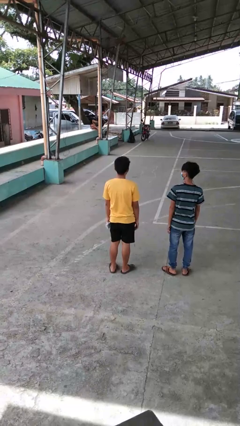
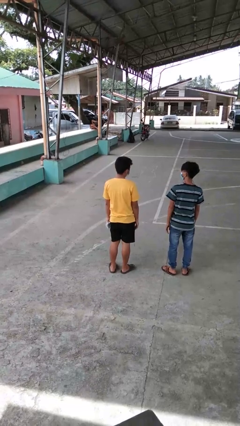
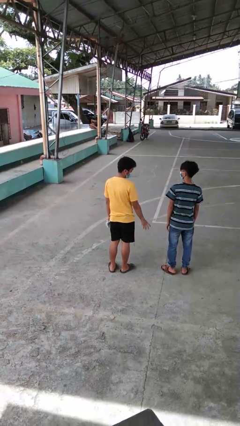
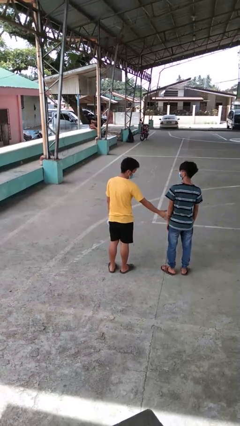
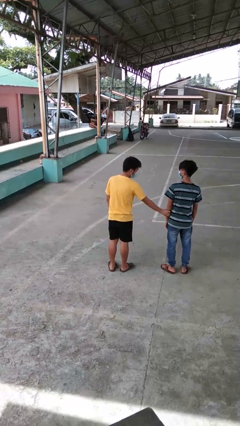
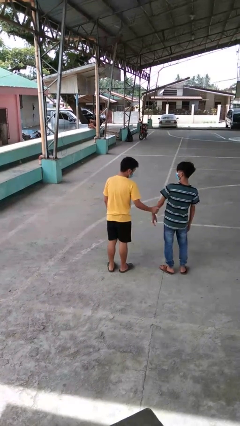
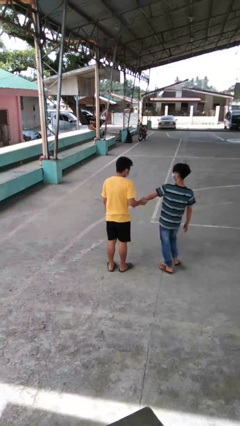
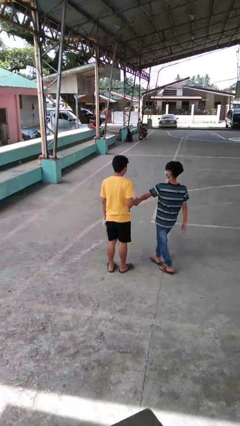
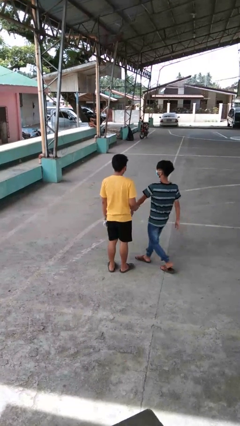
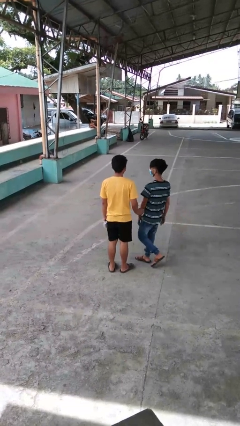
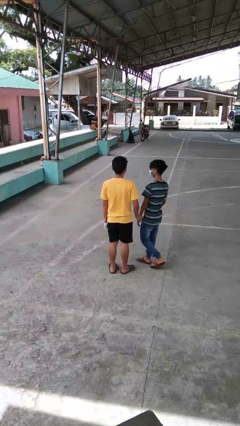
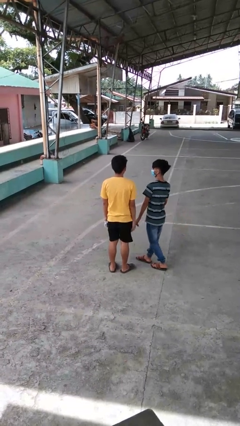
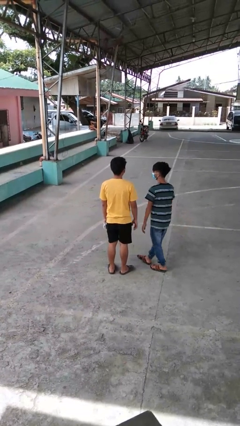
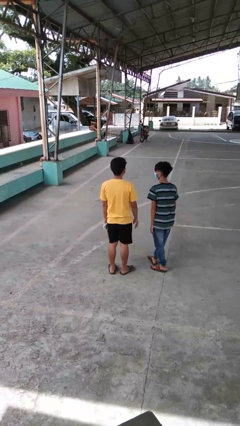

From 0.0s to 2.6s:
person grabs person by forearm

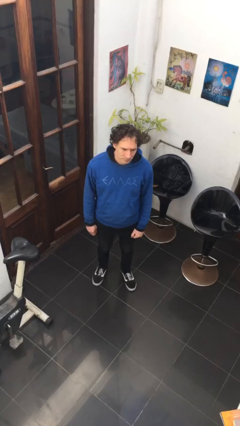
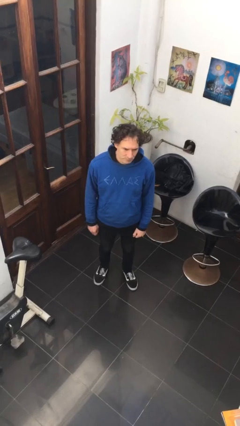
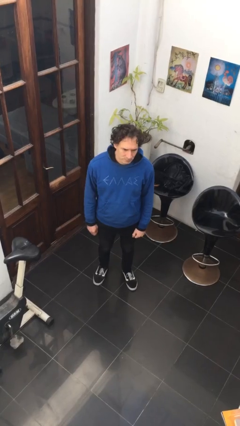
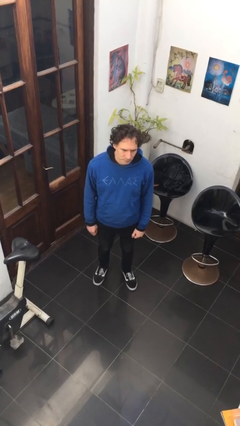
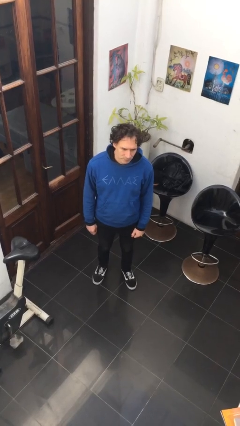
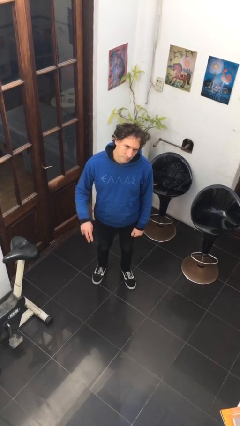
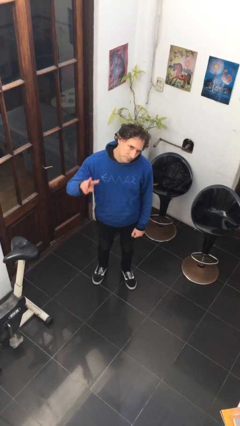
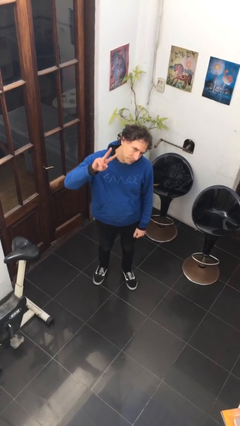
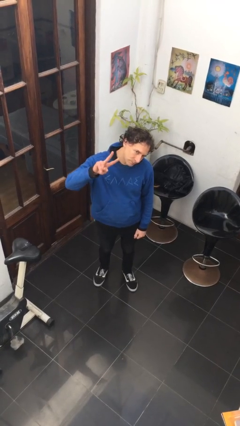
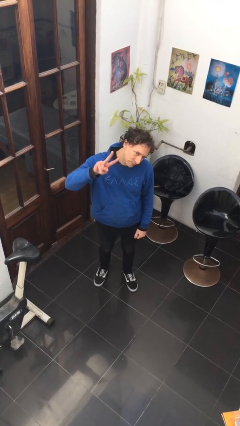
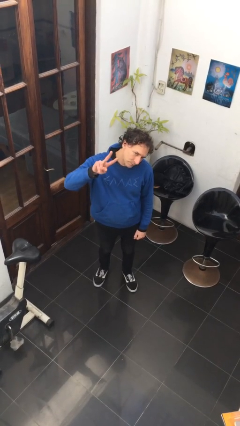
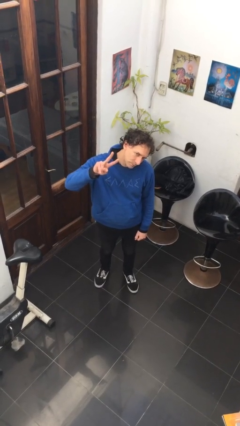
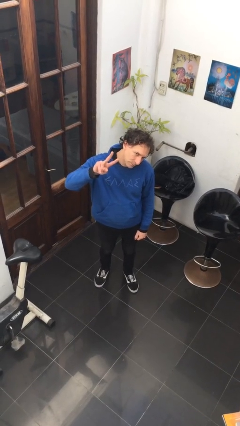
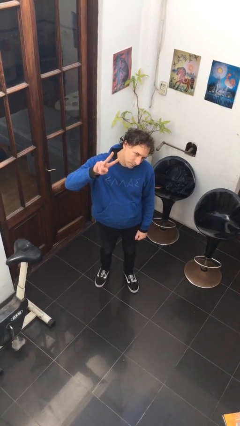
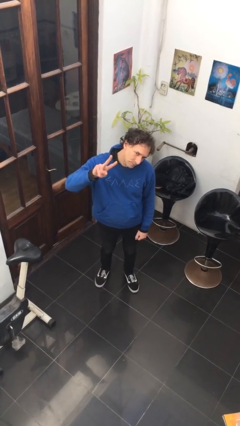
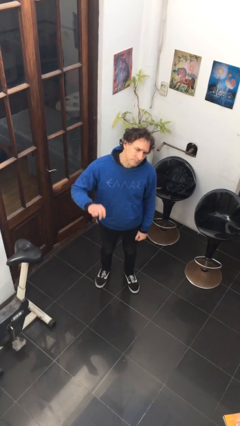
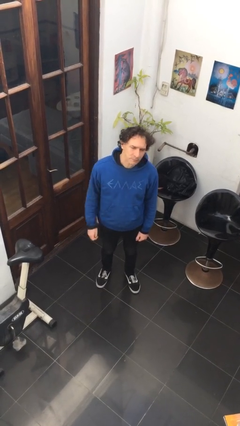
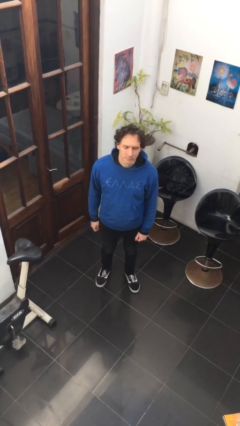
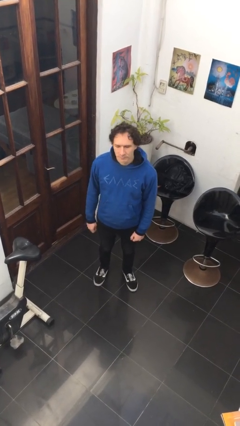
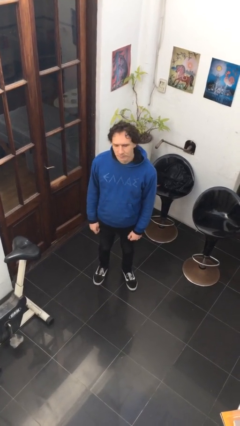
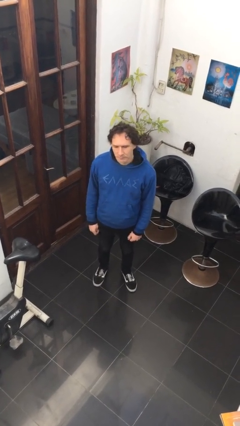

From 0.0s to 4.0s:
person gestures peace

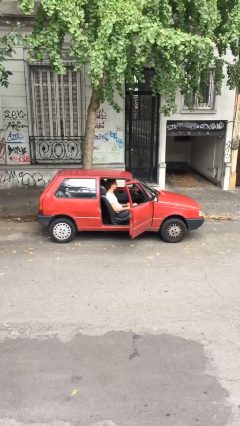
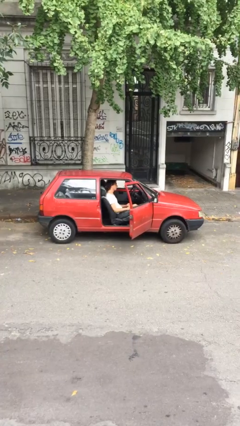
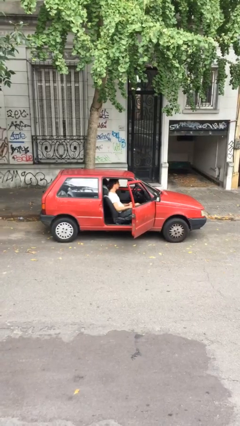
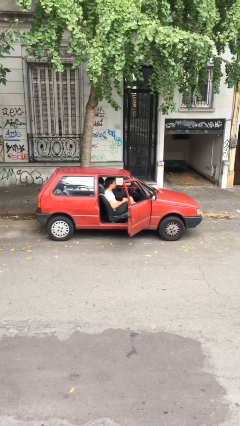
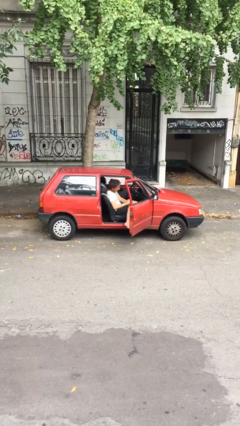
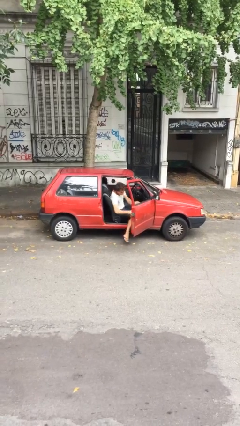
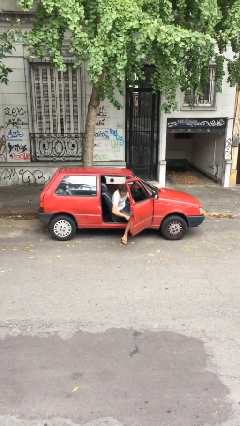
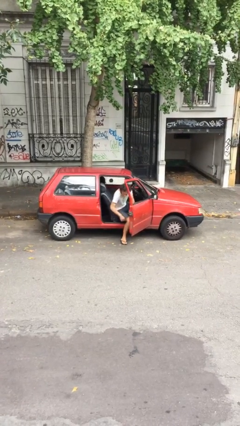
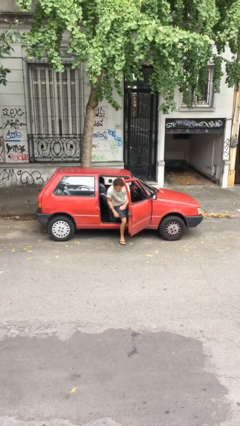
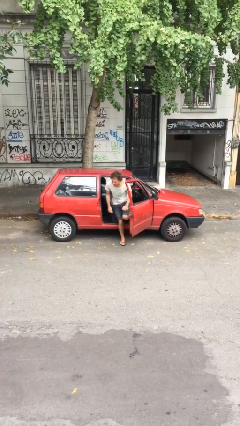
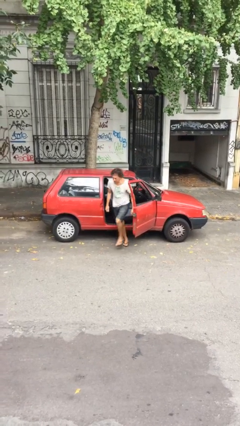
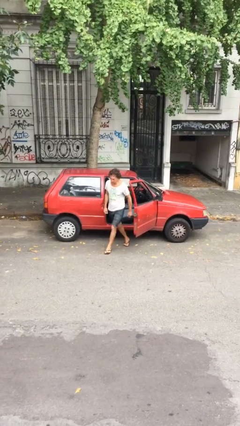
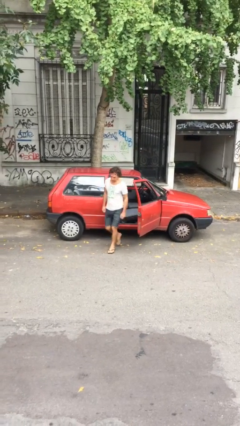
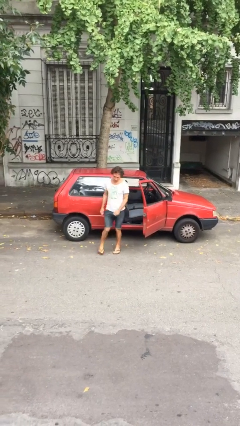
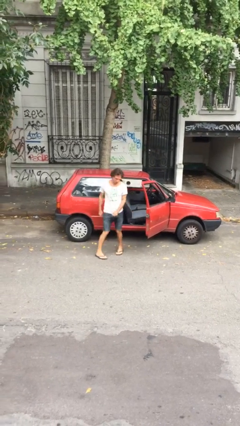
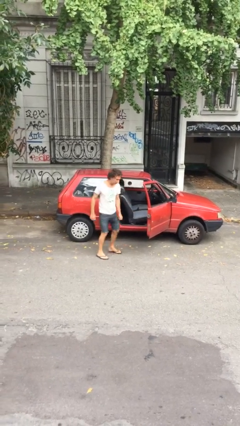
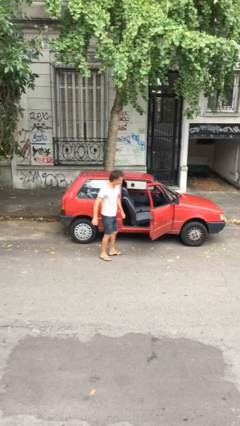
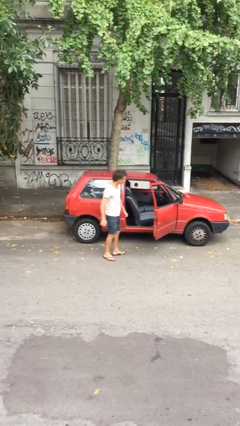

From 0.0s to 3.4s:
person exits car

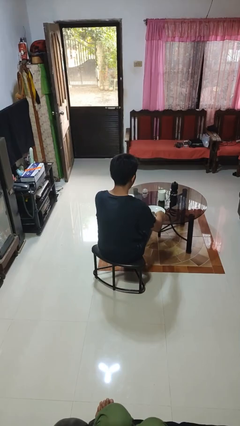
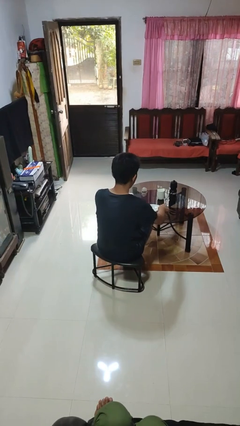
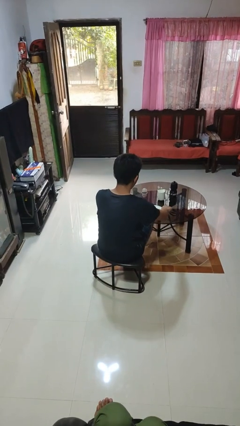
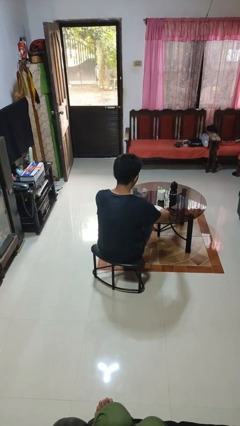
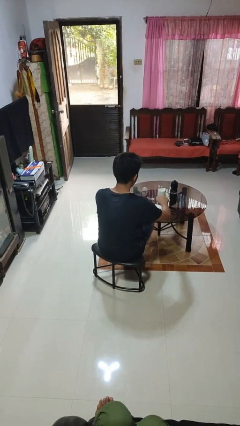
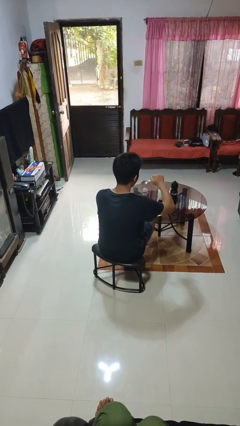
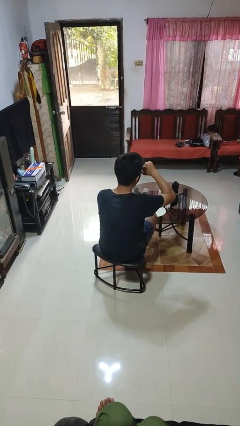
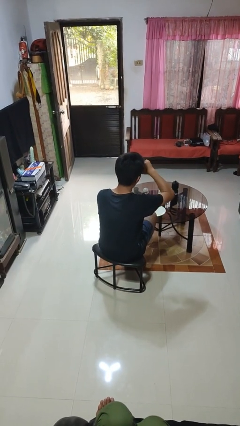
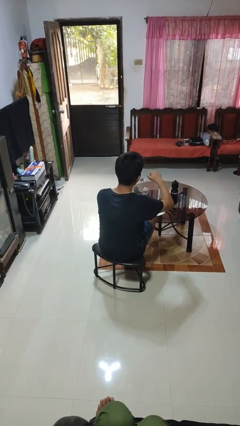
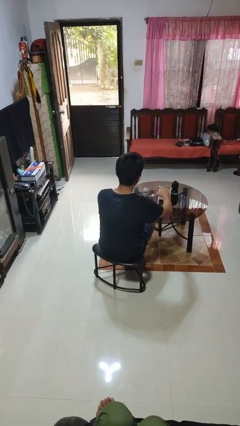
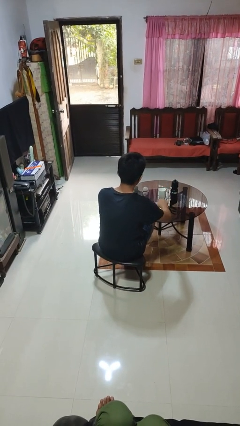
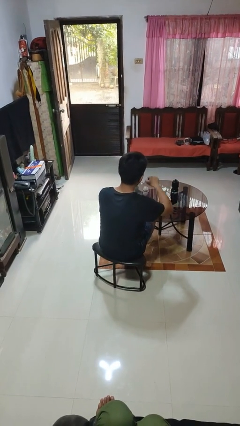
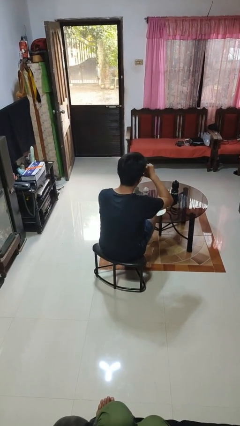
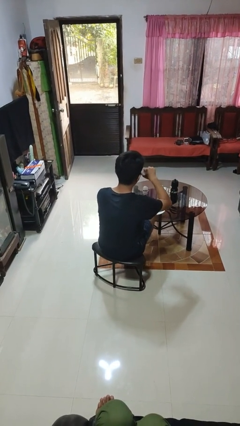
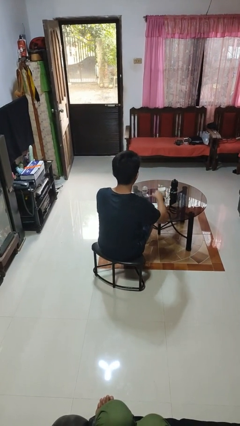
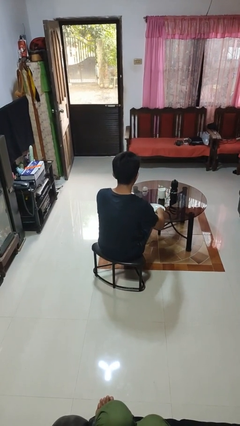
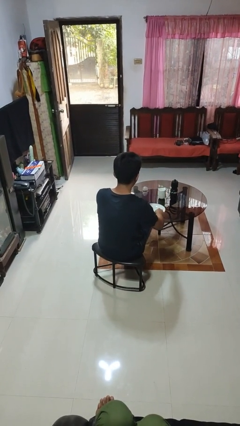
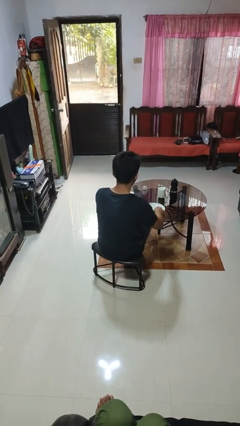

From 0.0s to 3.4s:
person eats with utensil

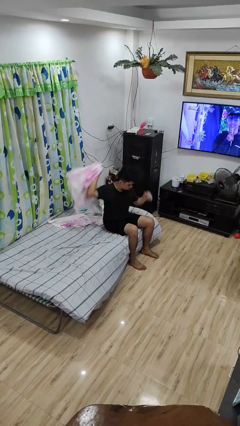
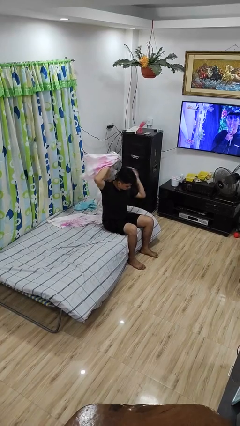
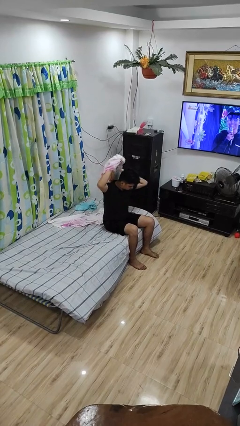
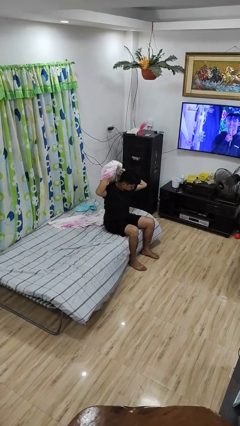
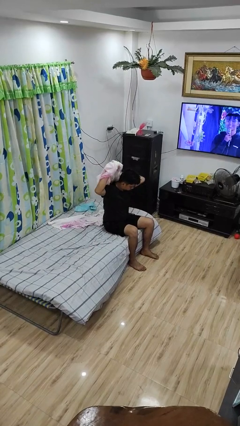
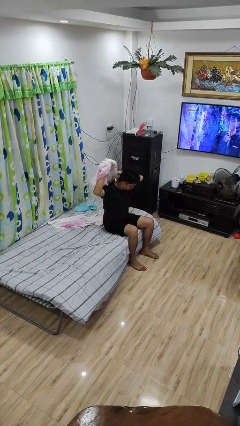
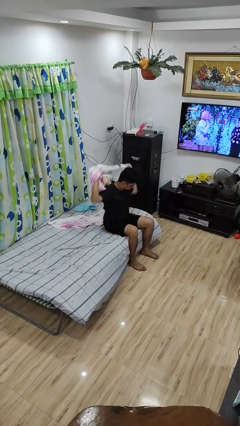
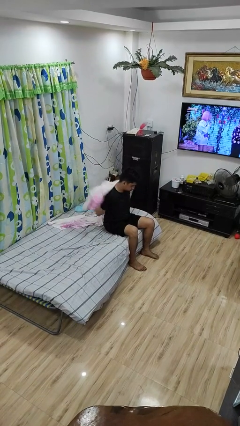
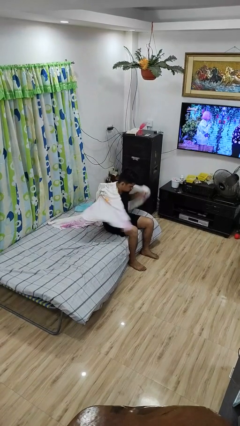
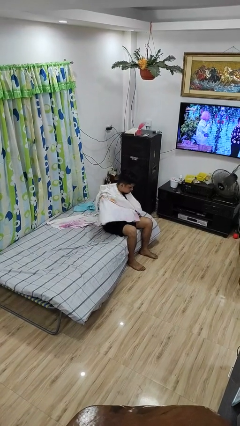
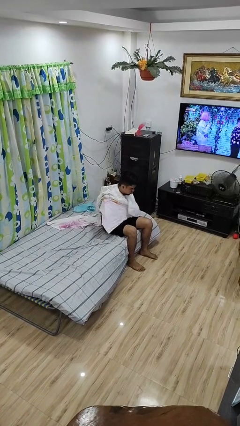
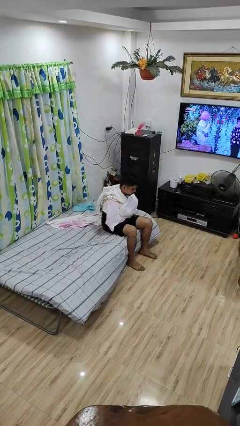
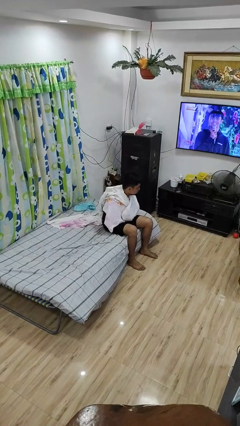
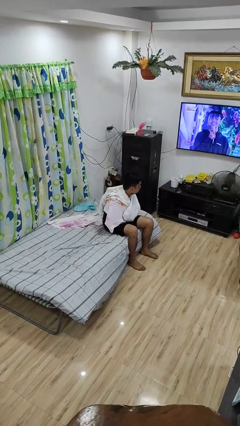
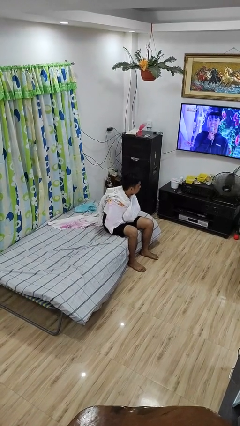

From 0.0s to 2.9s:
person covers with blanket

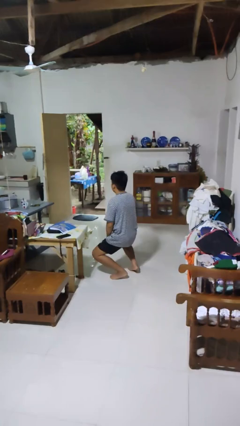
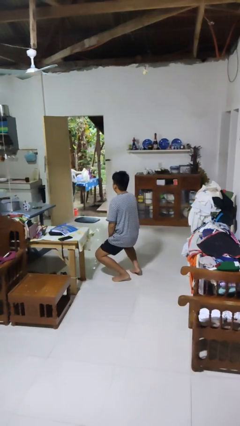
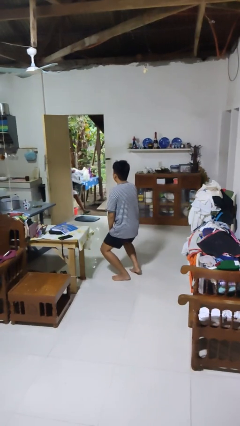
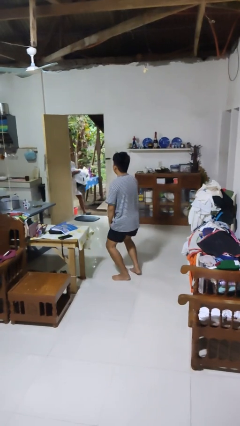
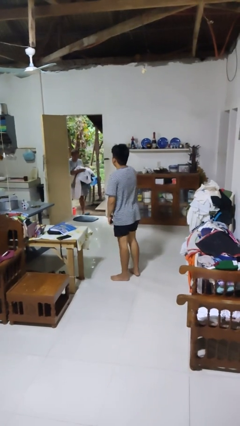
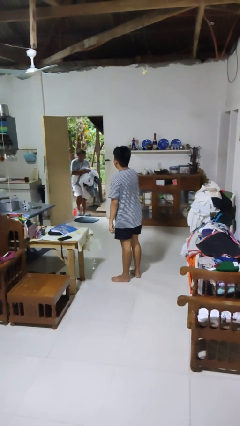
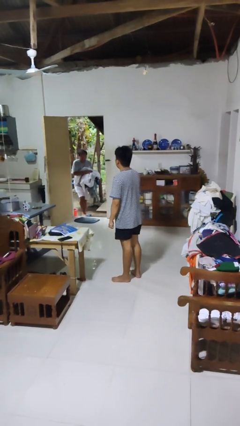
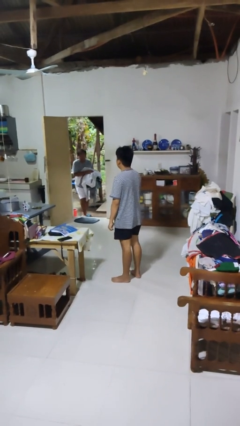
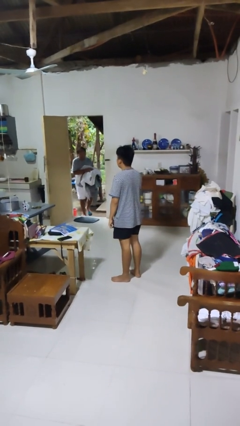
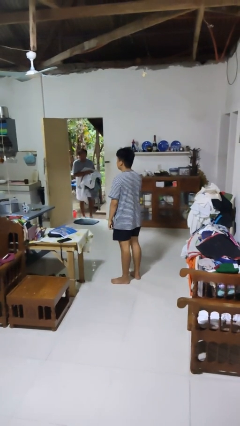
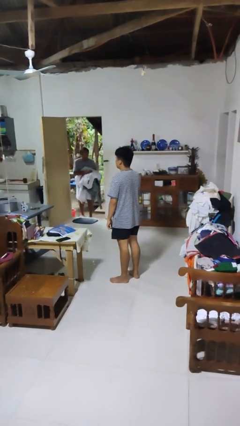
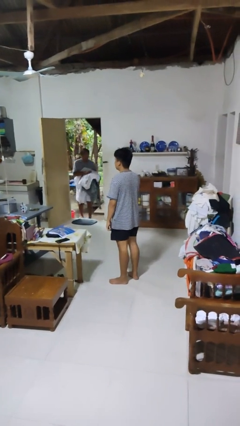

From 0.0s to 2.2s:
person stands up
